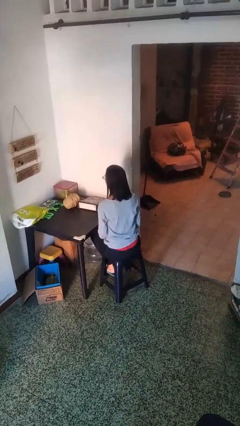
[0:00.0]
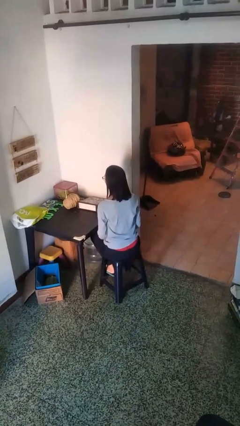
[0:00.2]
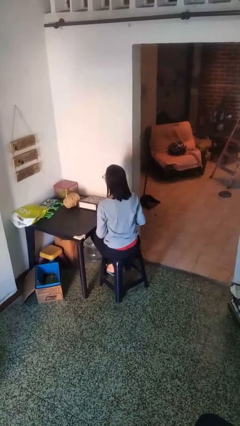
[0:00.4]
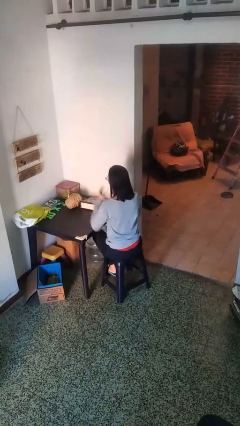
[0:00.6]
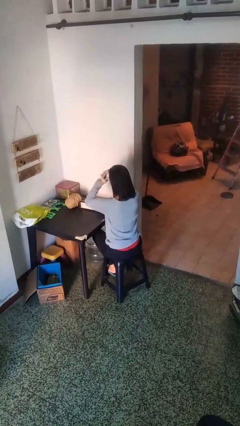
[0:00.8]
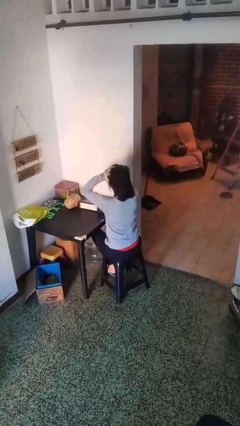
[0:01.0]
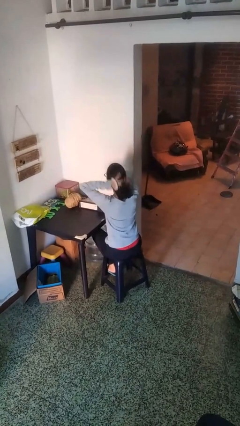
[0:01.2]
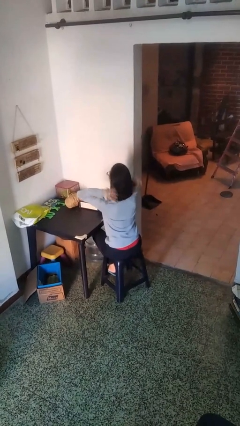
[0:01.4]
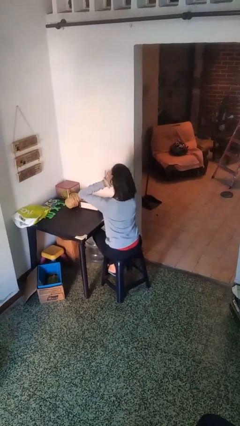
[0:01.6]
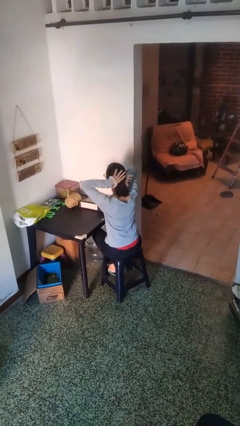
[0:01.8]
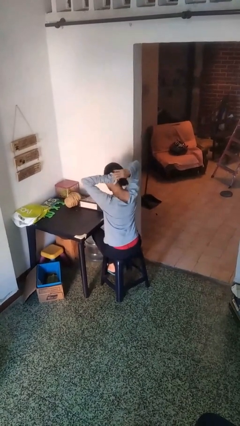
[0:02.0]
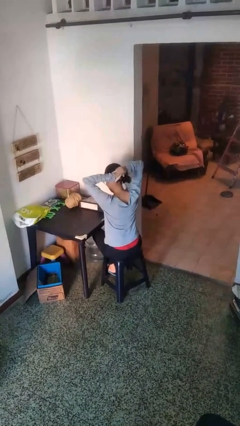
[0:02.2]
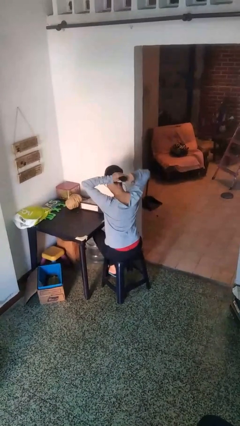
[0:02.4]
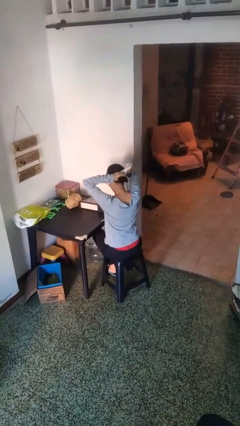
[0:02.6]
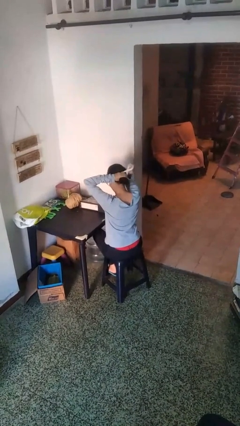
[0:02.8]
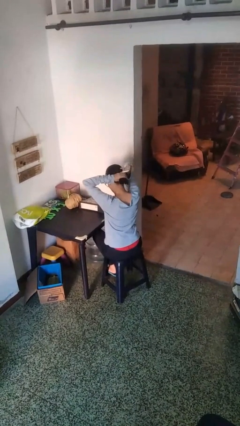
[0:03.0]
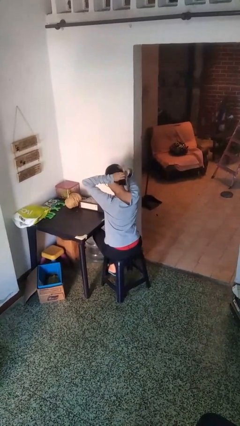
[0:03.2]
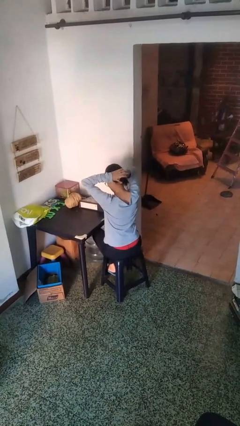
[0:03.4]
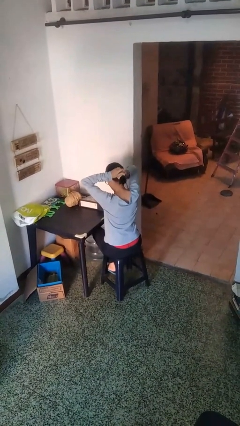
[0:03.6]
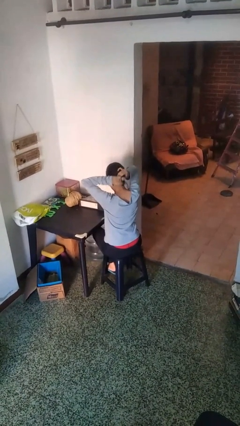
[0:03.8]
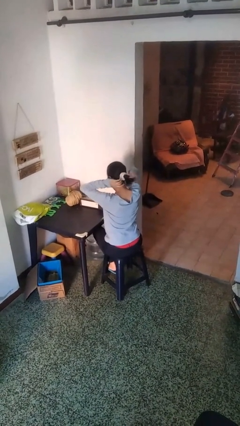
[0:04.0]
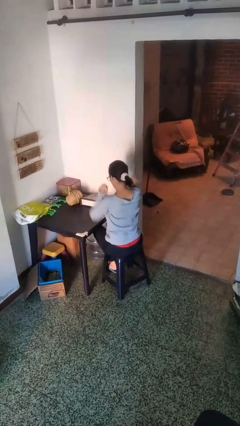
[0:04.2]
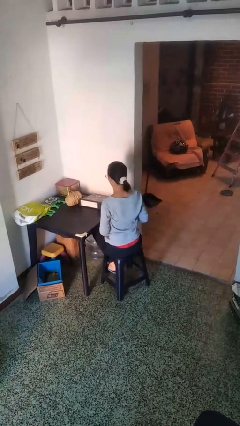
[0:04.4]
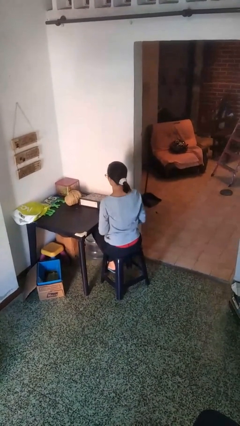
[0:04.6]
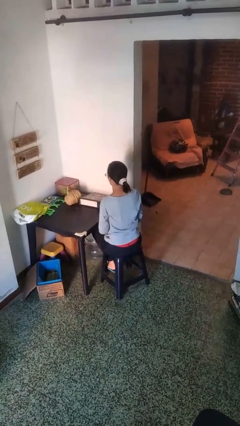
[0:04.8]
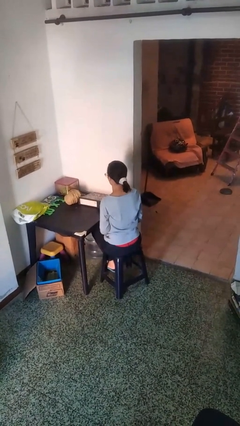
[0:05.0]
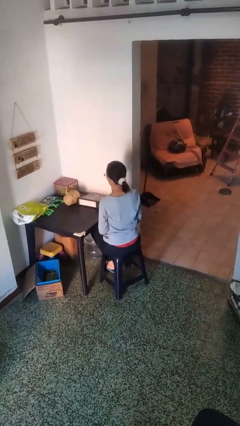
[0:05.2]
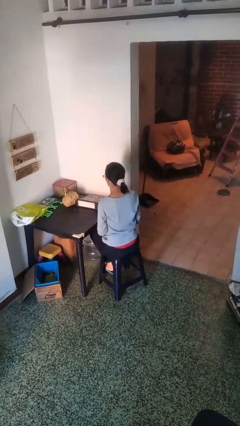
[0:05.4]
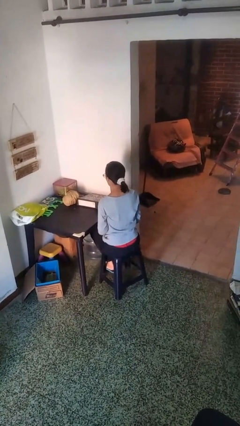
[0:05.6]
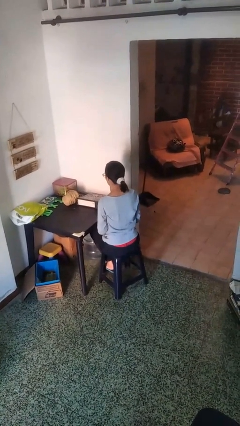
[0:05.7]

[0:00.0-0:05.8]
person puts hair in ponytail

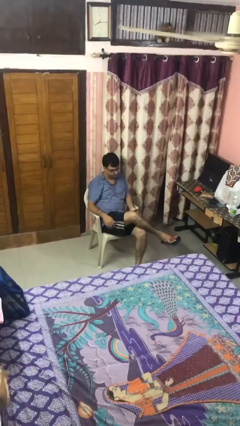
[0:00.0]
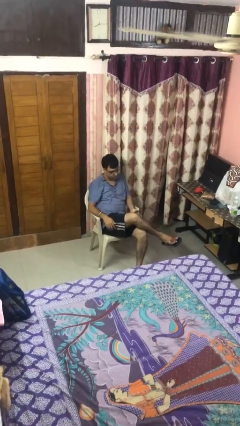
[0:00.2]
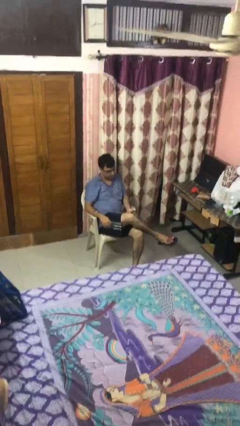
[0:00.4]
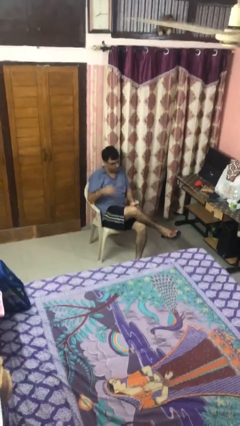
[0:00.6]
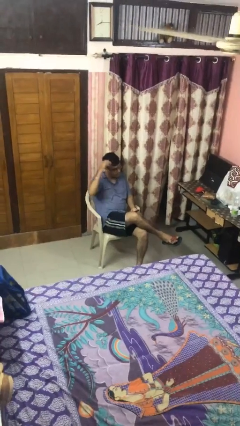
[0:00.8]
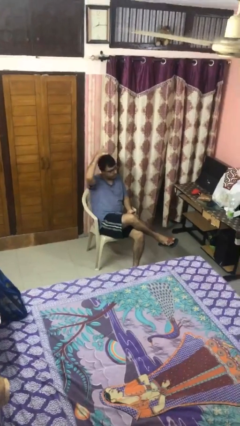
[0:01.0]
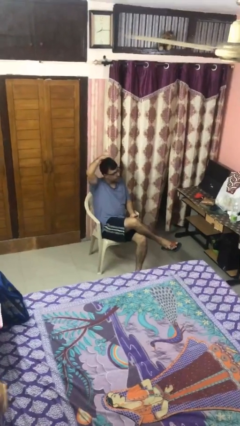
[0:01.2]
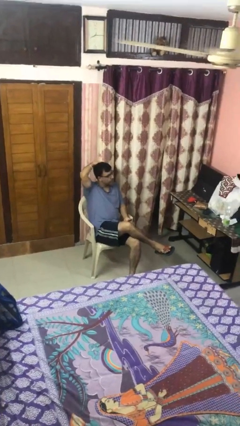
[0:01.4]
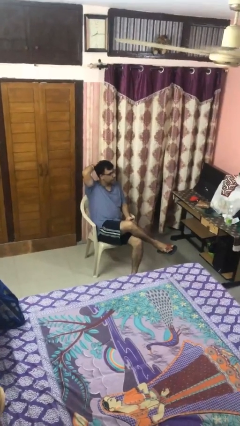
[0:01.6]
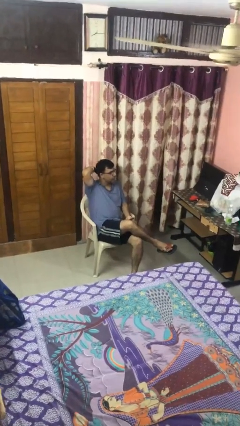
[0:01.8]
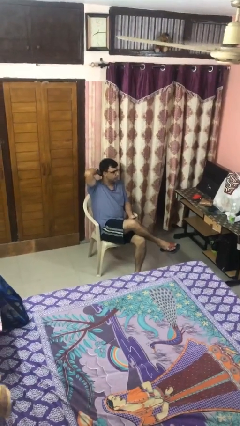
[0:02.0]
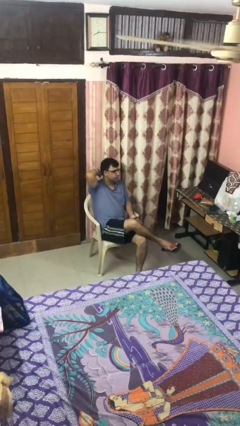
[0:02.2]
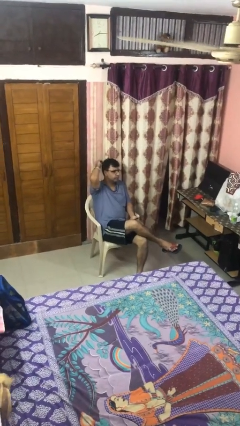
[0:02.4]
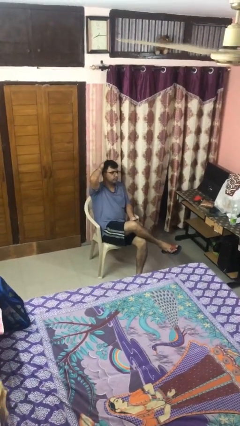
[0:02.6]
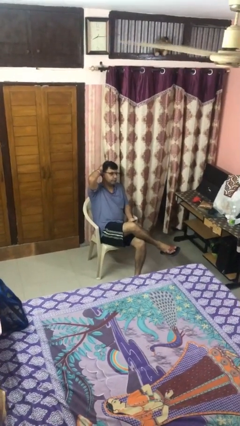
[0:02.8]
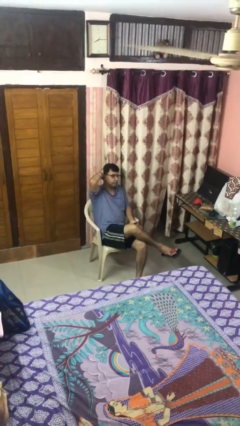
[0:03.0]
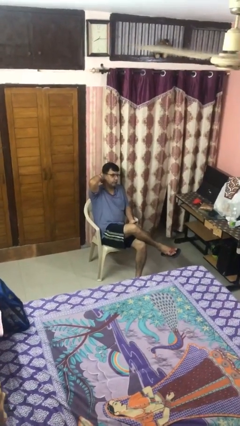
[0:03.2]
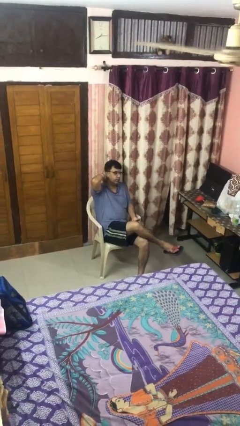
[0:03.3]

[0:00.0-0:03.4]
person strokes hair

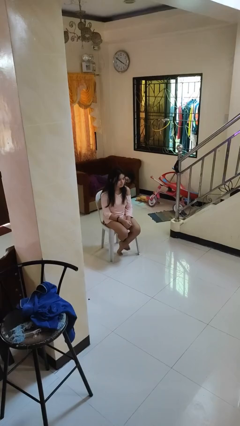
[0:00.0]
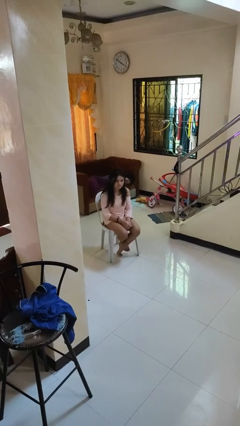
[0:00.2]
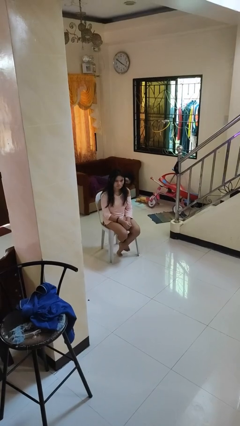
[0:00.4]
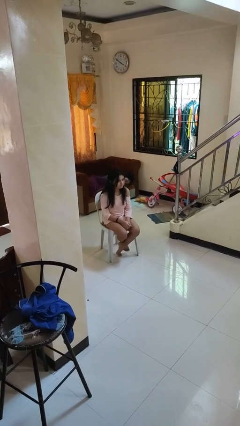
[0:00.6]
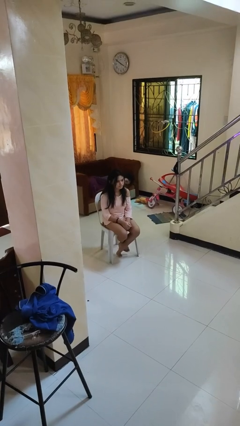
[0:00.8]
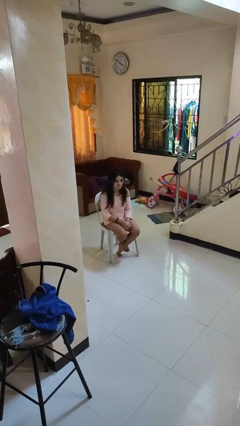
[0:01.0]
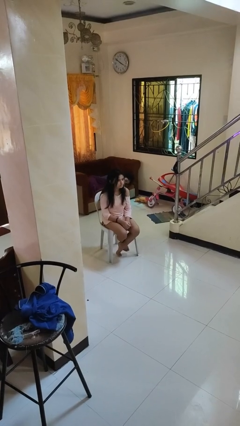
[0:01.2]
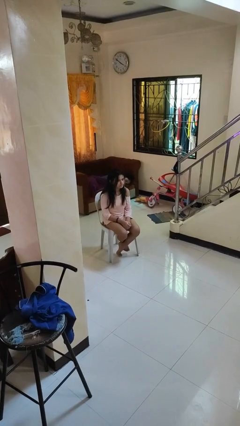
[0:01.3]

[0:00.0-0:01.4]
person shakes head

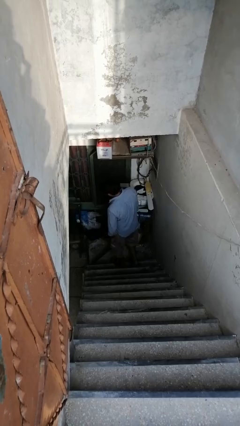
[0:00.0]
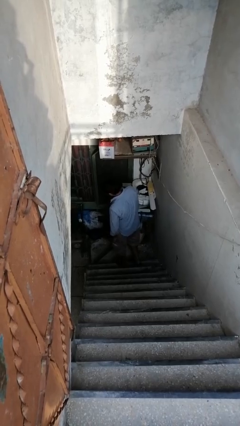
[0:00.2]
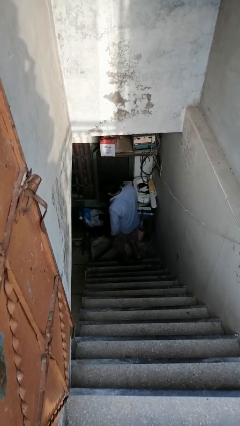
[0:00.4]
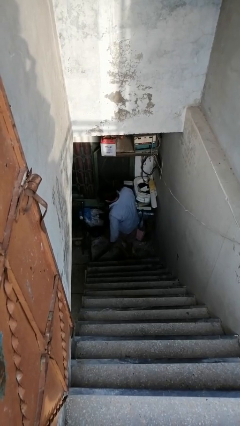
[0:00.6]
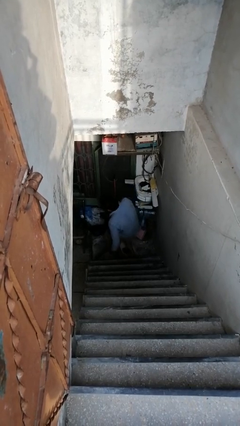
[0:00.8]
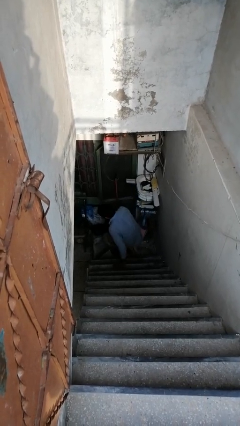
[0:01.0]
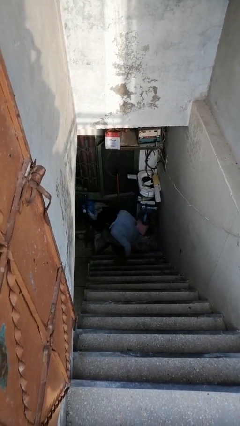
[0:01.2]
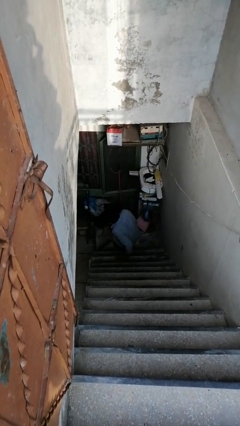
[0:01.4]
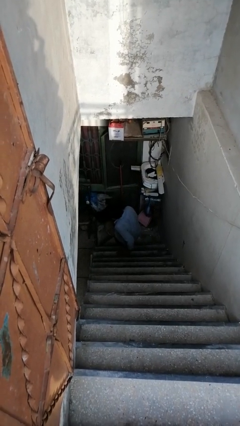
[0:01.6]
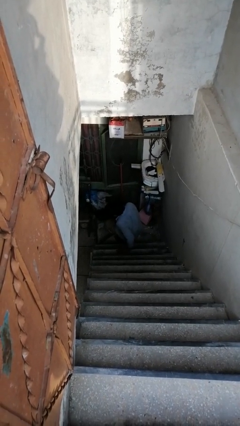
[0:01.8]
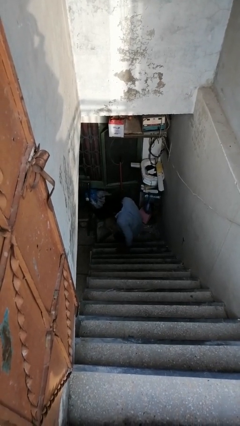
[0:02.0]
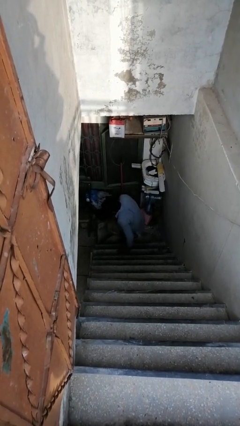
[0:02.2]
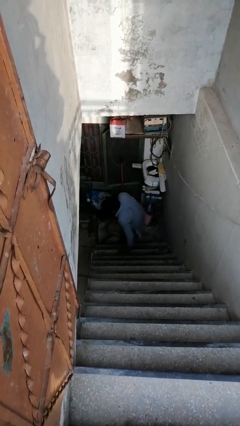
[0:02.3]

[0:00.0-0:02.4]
person trips on stair

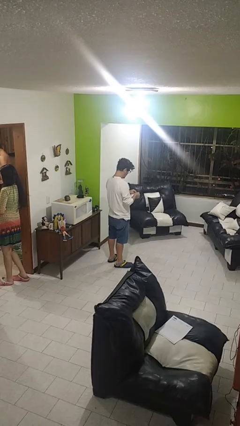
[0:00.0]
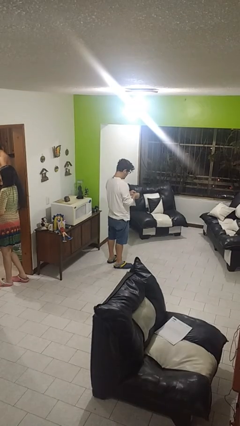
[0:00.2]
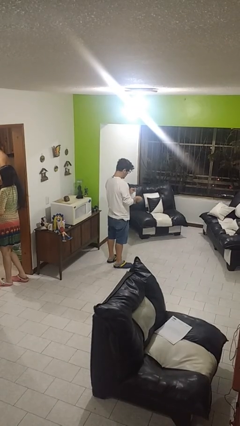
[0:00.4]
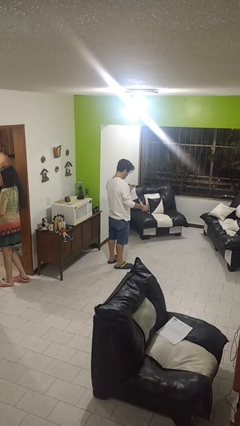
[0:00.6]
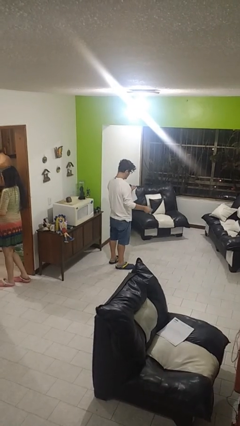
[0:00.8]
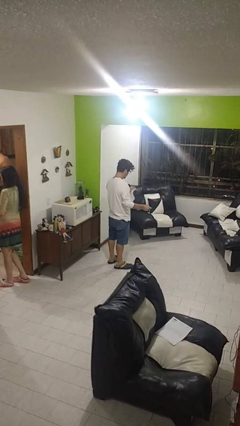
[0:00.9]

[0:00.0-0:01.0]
person tears paper

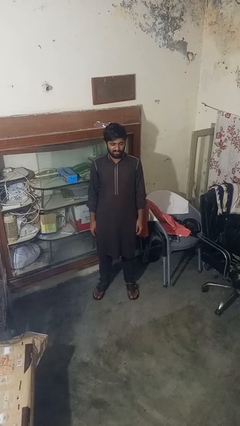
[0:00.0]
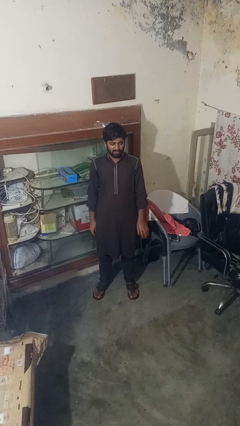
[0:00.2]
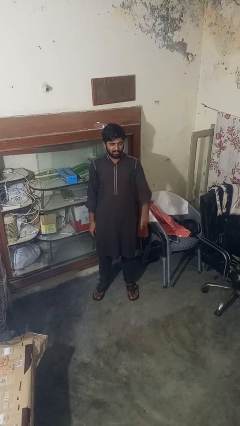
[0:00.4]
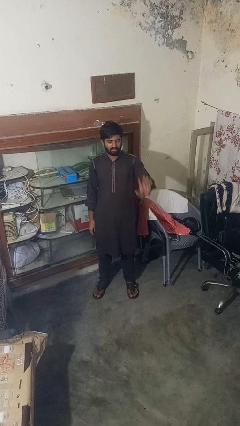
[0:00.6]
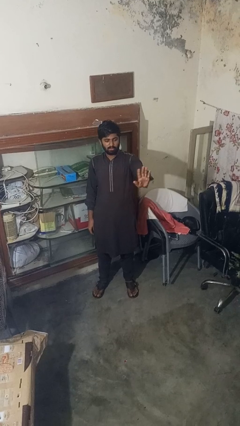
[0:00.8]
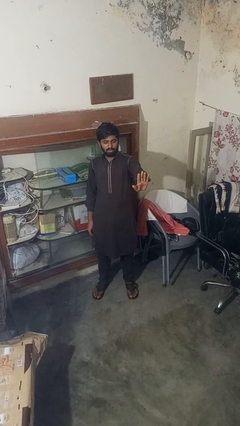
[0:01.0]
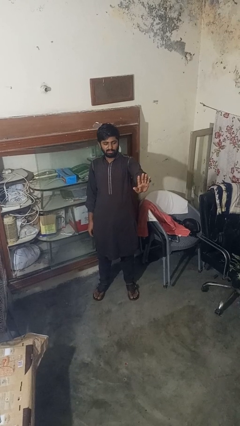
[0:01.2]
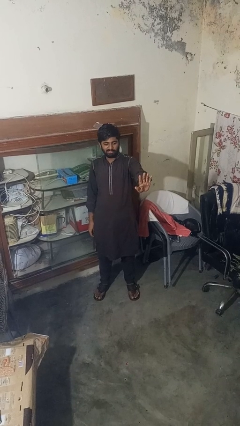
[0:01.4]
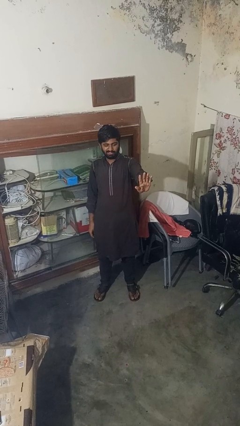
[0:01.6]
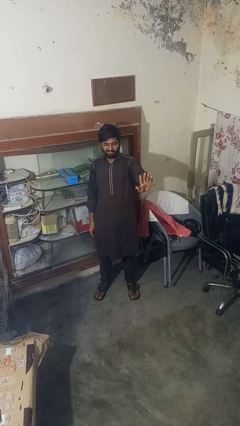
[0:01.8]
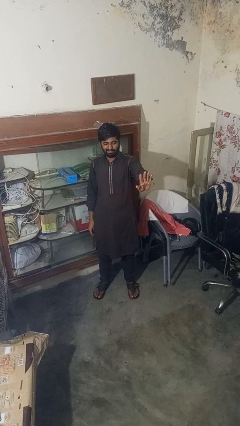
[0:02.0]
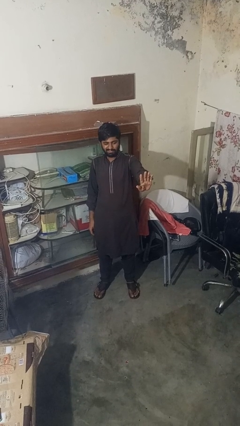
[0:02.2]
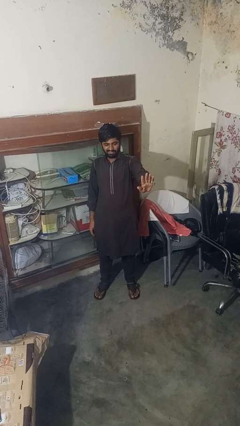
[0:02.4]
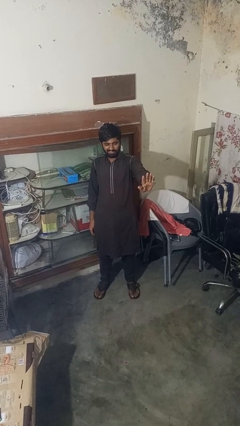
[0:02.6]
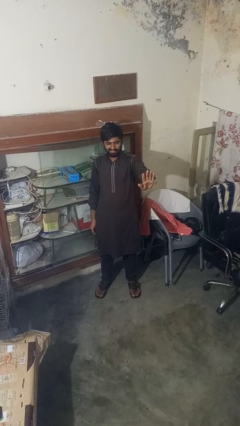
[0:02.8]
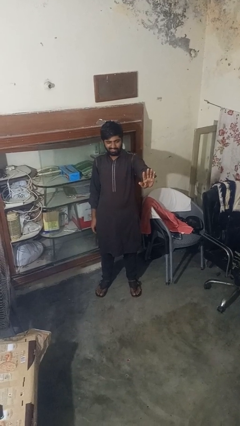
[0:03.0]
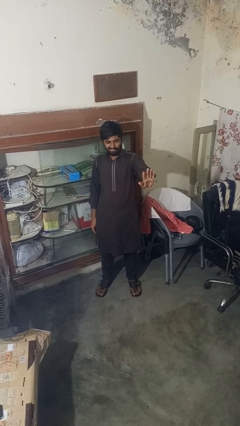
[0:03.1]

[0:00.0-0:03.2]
person gestures number five
